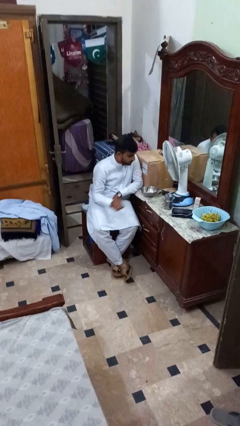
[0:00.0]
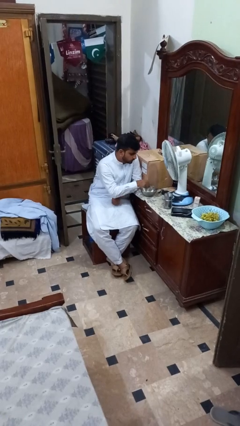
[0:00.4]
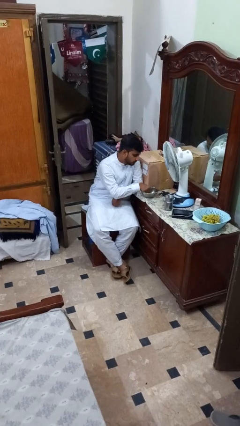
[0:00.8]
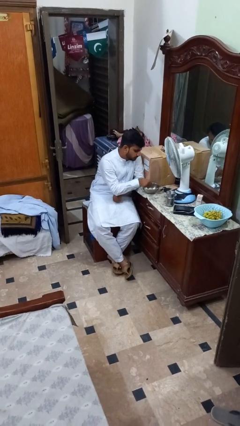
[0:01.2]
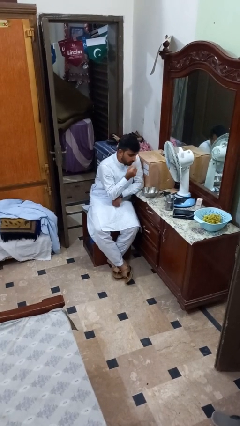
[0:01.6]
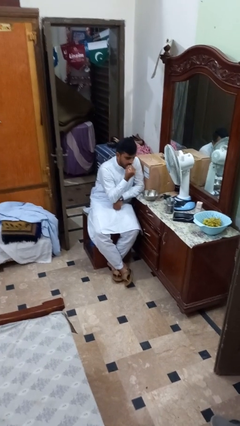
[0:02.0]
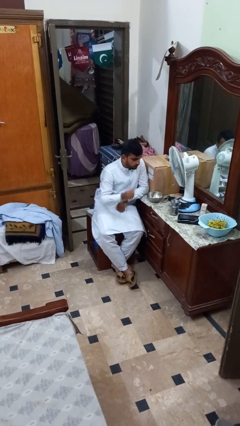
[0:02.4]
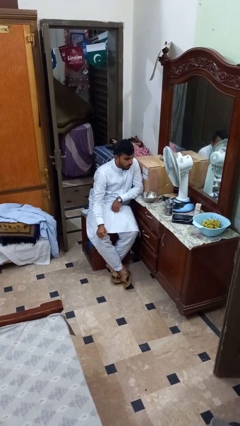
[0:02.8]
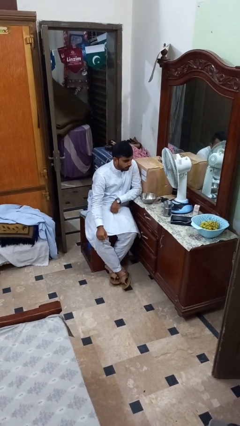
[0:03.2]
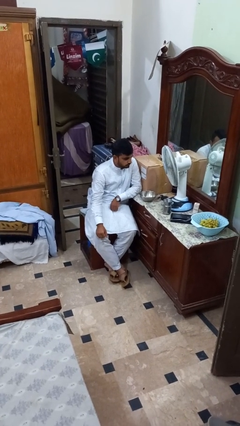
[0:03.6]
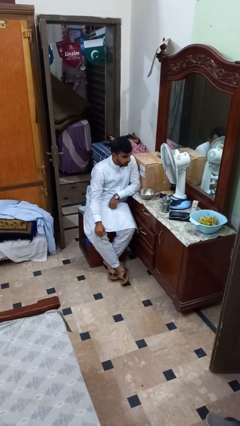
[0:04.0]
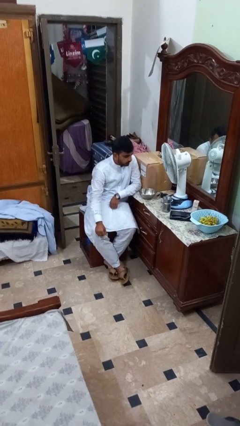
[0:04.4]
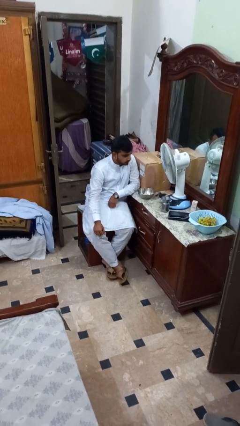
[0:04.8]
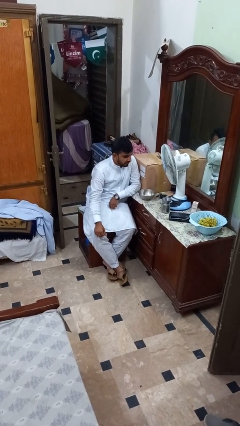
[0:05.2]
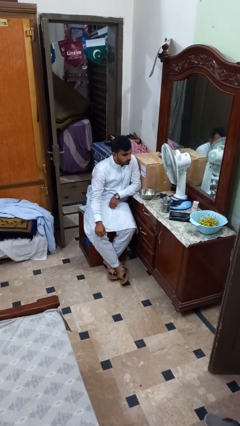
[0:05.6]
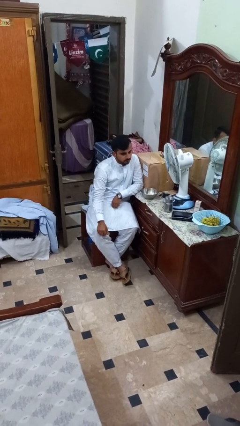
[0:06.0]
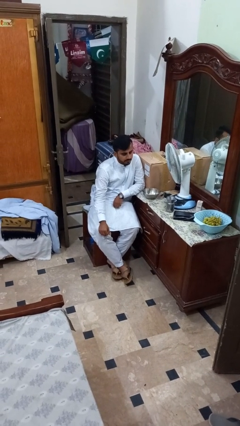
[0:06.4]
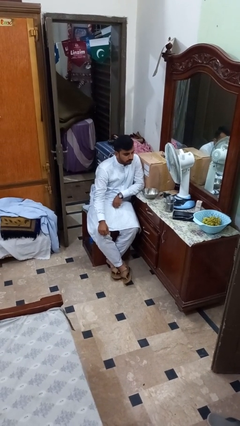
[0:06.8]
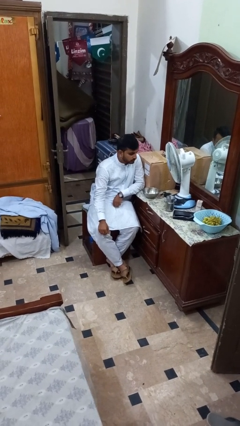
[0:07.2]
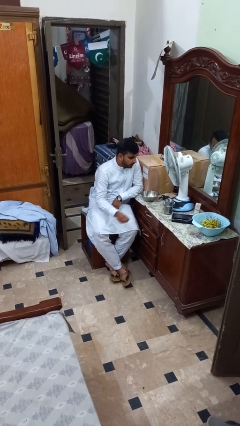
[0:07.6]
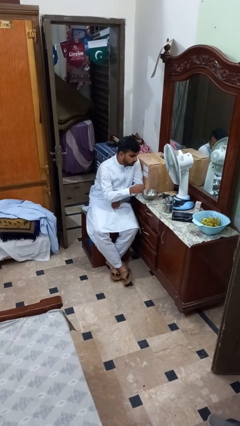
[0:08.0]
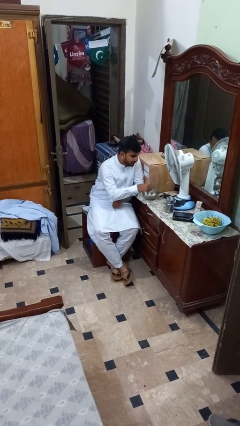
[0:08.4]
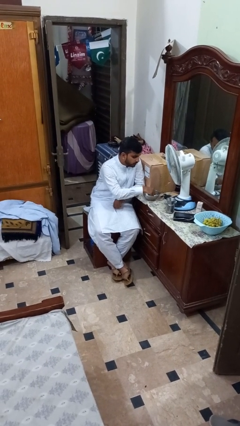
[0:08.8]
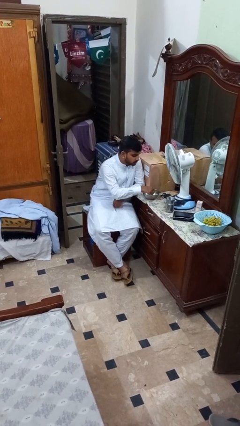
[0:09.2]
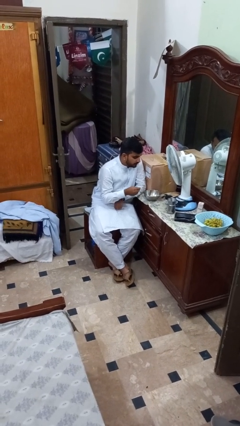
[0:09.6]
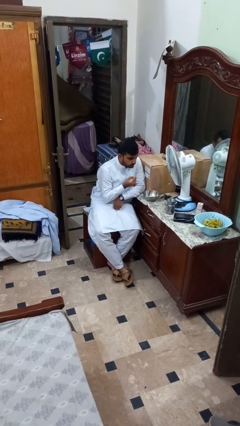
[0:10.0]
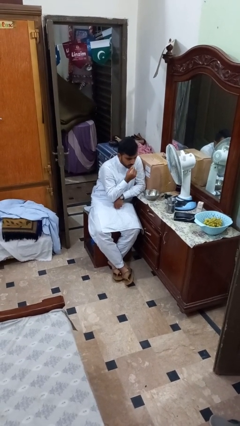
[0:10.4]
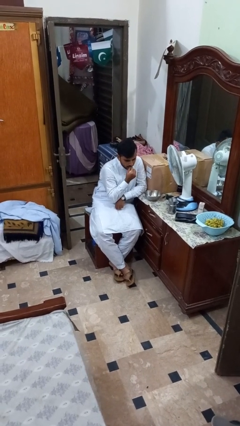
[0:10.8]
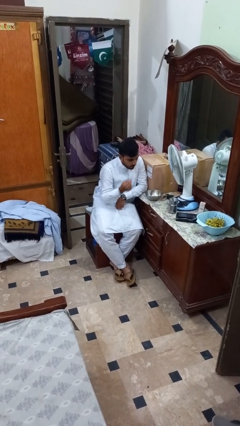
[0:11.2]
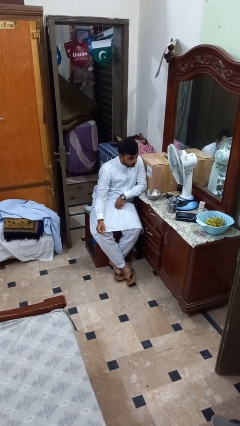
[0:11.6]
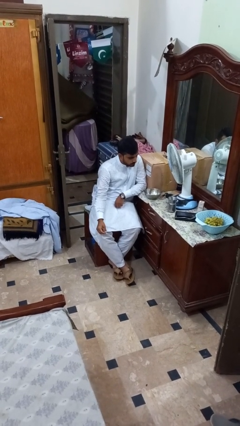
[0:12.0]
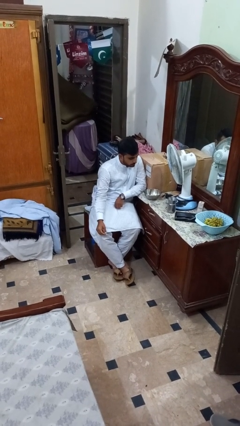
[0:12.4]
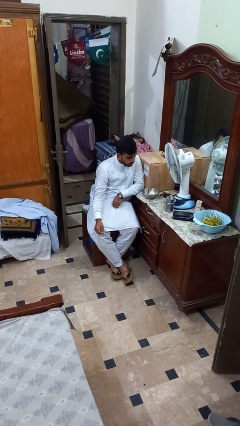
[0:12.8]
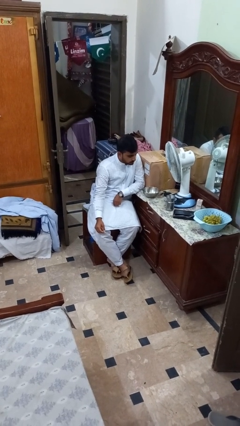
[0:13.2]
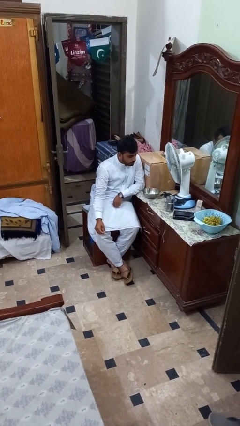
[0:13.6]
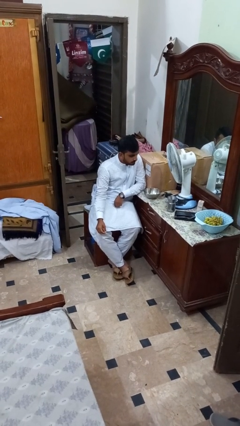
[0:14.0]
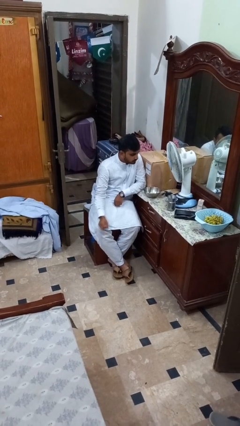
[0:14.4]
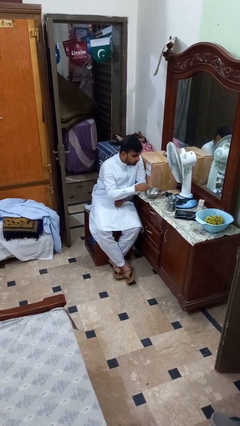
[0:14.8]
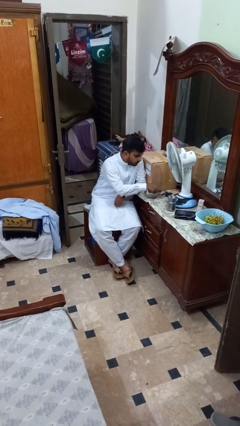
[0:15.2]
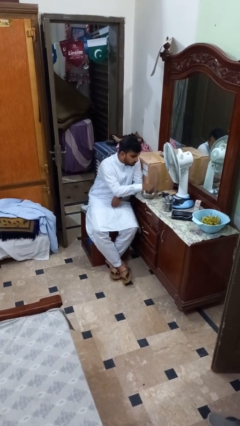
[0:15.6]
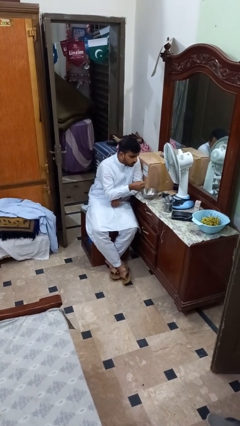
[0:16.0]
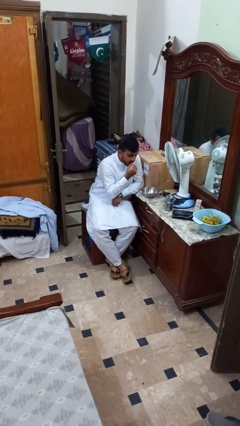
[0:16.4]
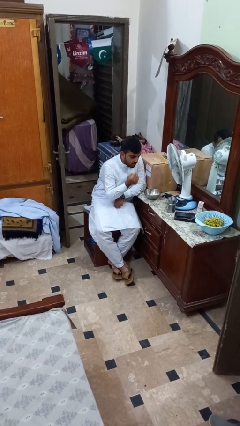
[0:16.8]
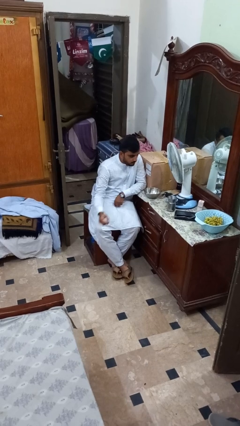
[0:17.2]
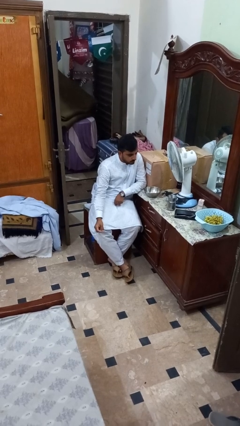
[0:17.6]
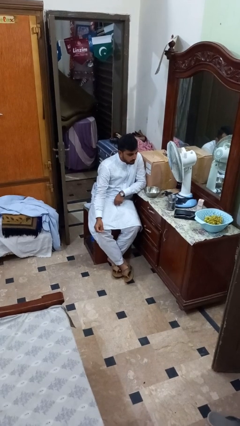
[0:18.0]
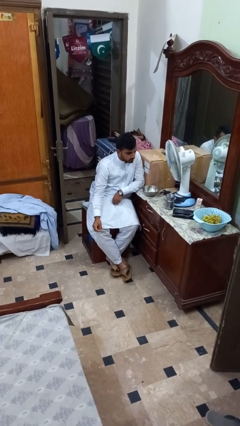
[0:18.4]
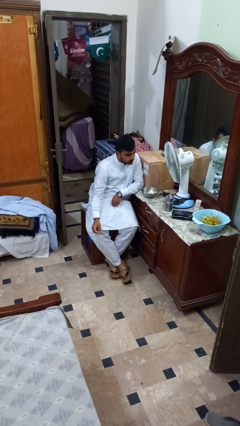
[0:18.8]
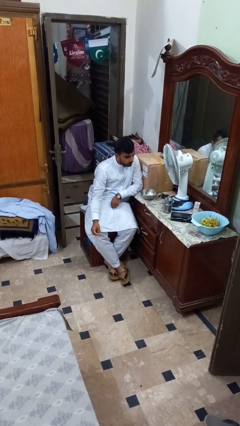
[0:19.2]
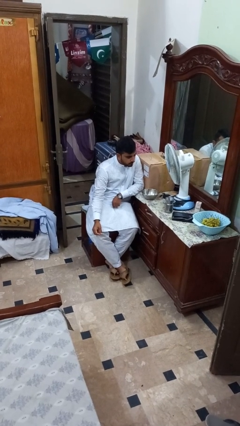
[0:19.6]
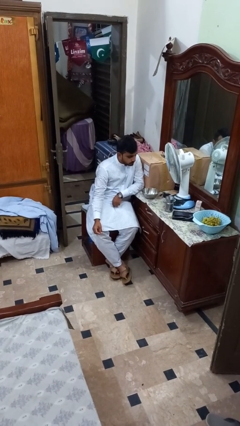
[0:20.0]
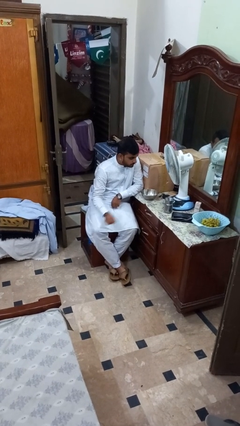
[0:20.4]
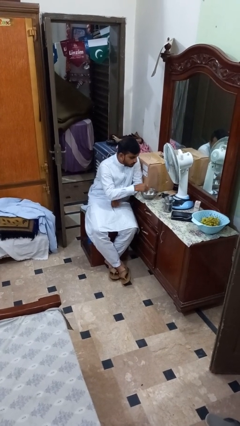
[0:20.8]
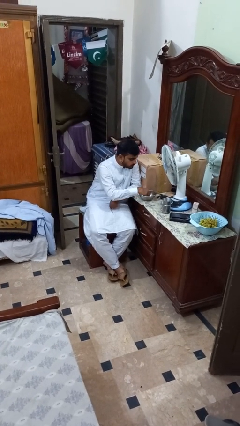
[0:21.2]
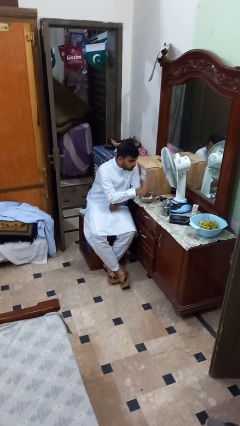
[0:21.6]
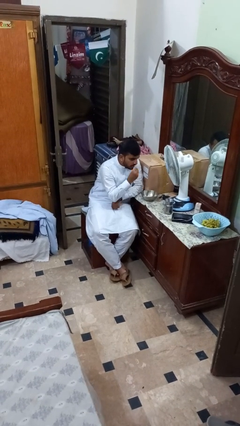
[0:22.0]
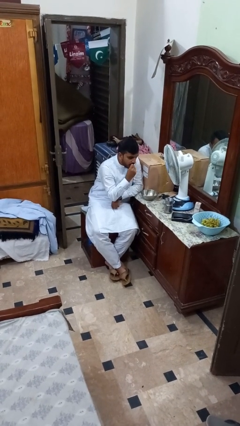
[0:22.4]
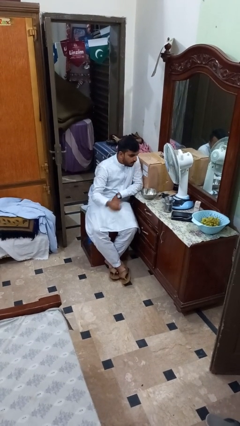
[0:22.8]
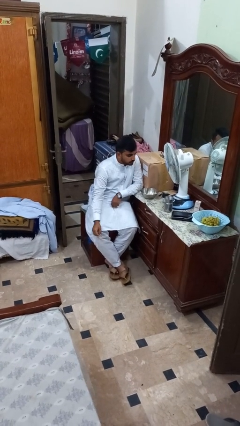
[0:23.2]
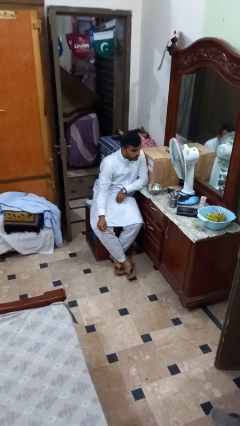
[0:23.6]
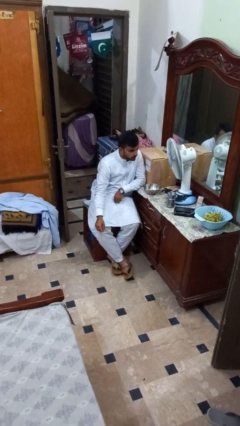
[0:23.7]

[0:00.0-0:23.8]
person eats with hands

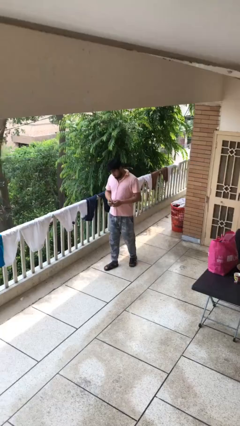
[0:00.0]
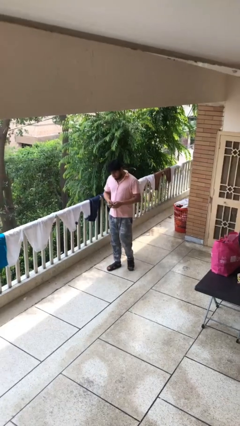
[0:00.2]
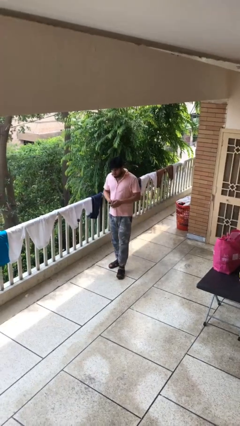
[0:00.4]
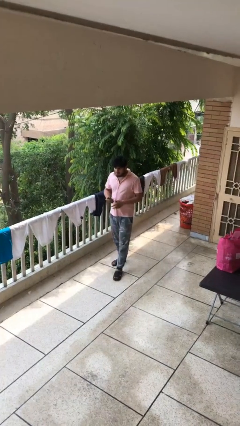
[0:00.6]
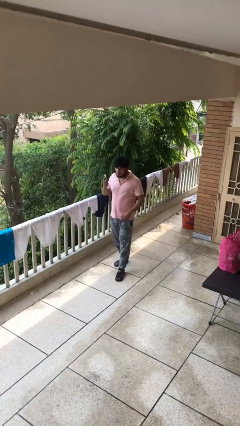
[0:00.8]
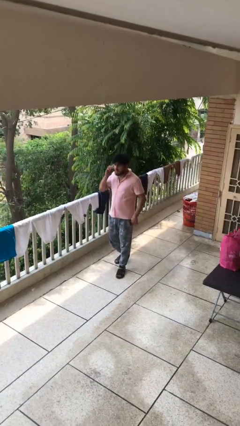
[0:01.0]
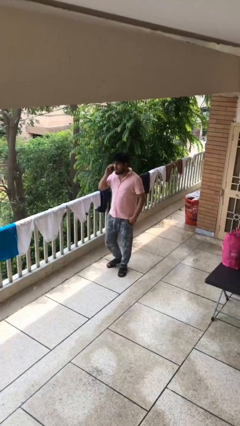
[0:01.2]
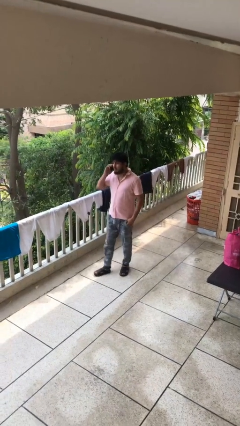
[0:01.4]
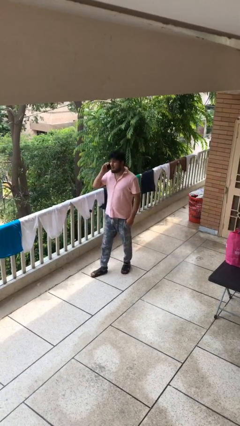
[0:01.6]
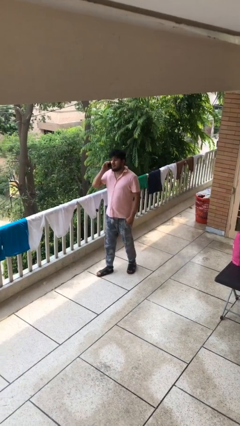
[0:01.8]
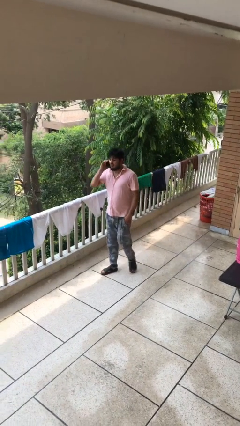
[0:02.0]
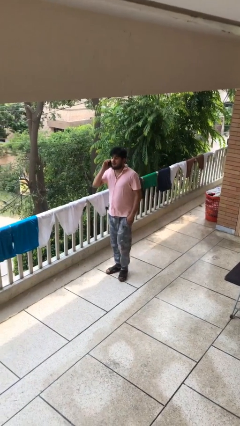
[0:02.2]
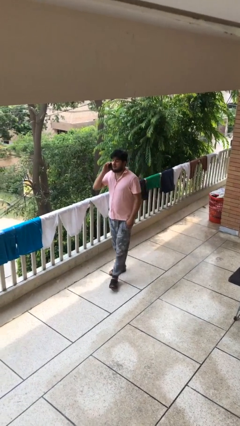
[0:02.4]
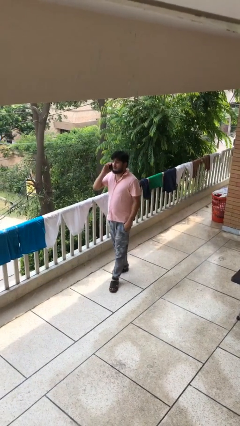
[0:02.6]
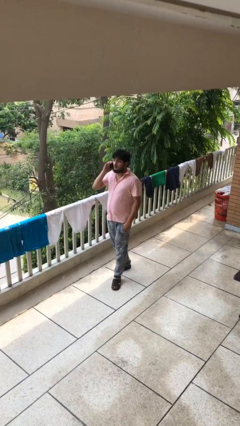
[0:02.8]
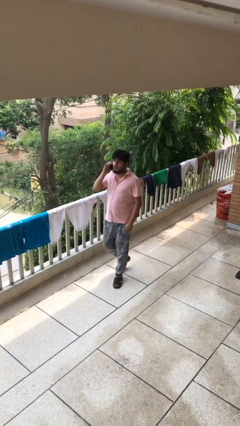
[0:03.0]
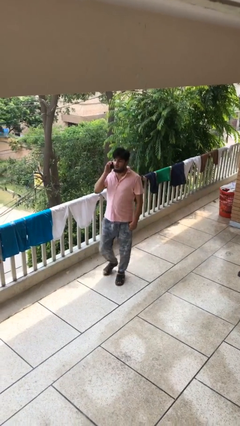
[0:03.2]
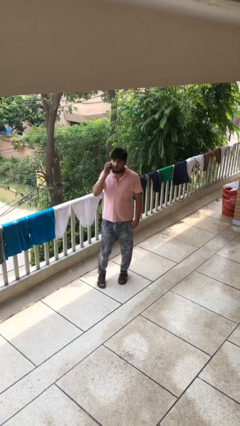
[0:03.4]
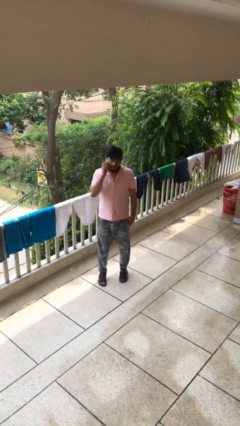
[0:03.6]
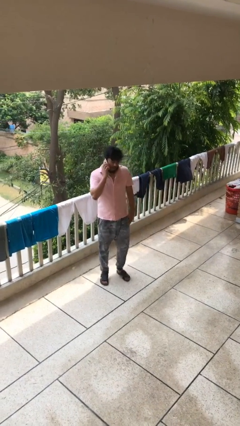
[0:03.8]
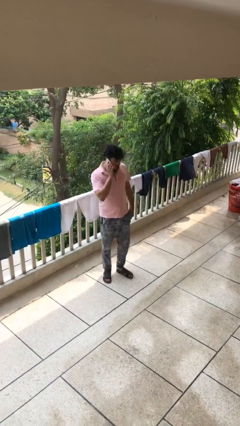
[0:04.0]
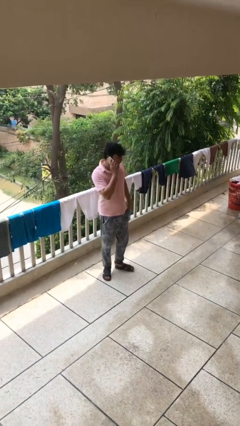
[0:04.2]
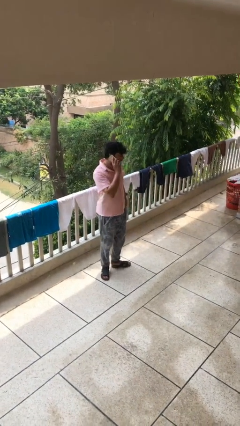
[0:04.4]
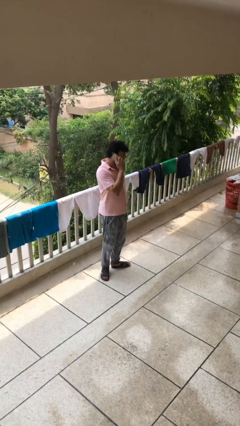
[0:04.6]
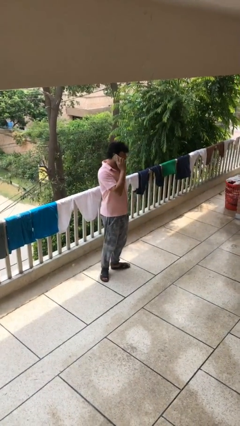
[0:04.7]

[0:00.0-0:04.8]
person talks on phone

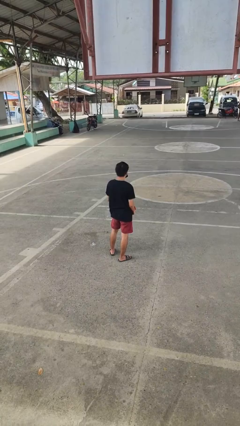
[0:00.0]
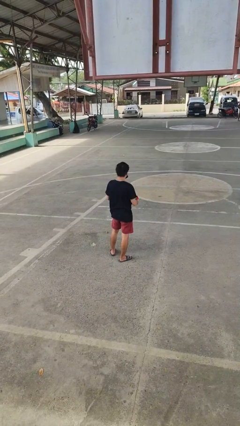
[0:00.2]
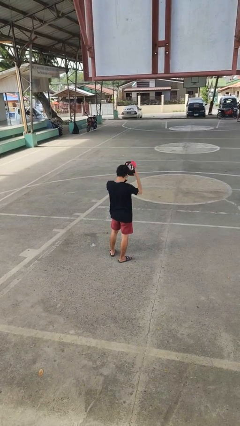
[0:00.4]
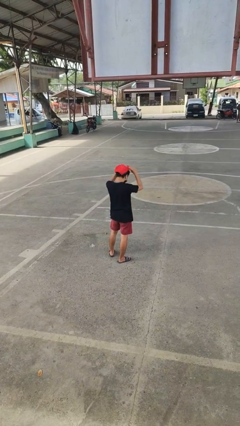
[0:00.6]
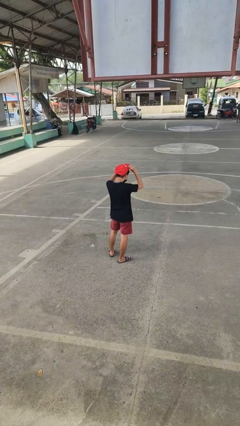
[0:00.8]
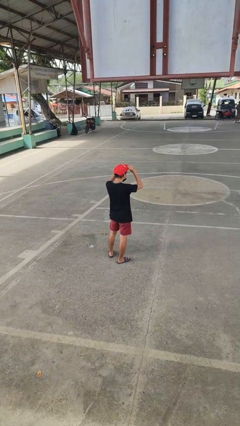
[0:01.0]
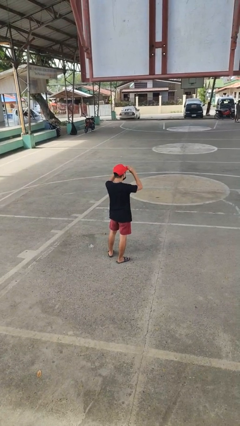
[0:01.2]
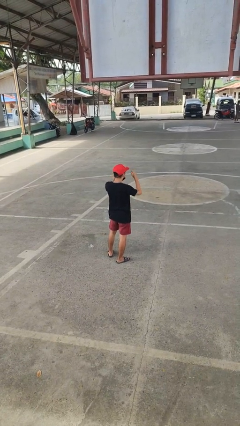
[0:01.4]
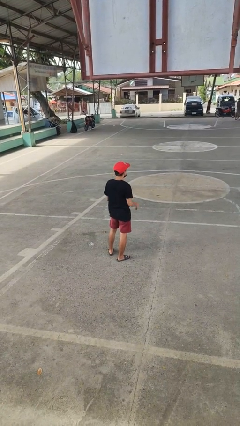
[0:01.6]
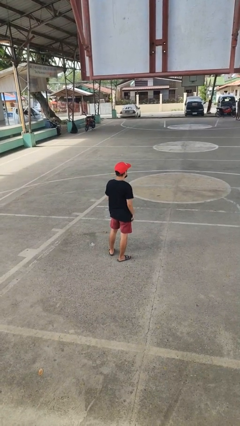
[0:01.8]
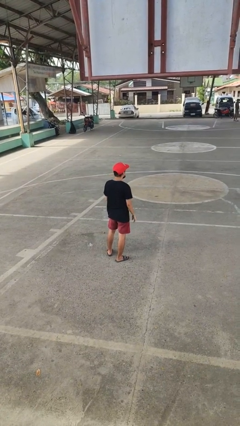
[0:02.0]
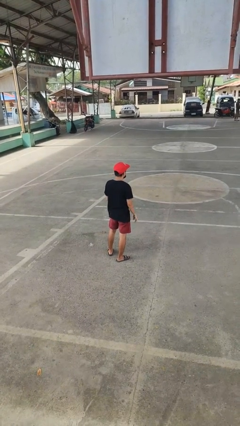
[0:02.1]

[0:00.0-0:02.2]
person puts on hat
